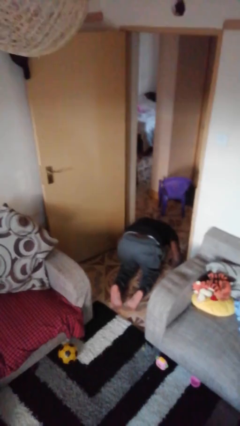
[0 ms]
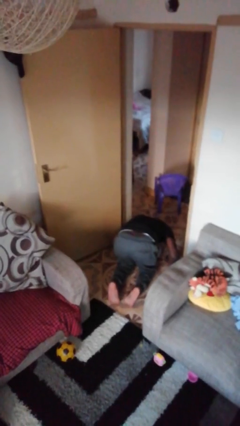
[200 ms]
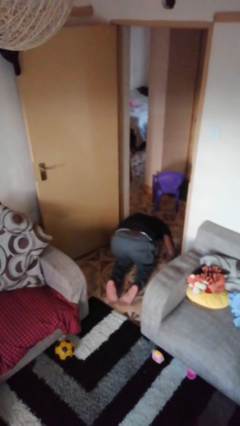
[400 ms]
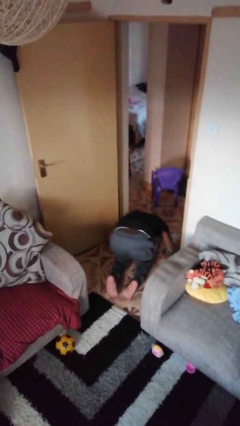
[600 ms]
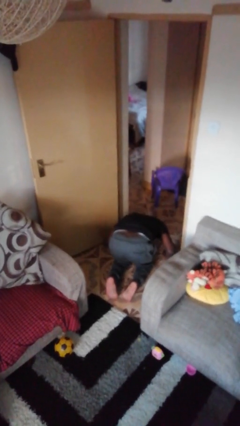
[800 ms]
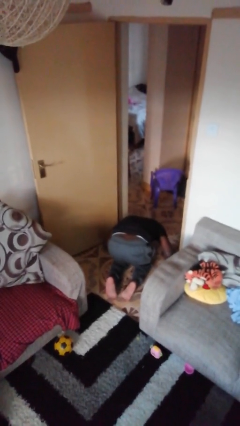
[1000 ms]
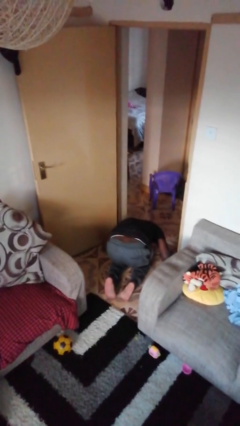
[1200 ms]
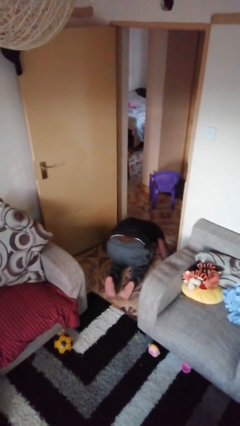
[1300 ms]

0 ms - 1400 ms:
person lies down on floor

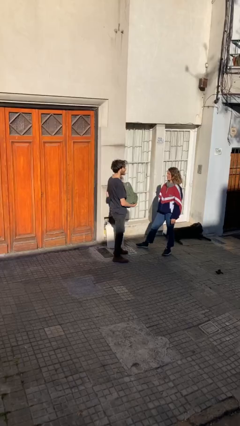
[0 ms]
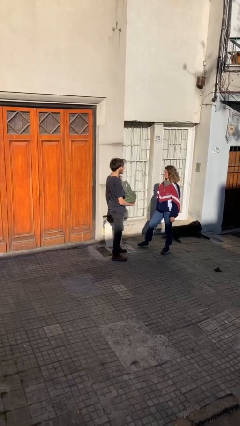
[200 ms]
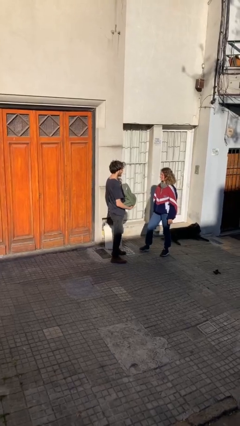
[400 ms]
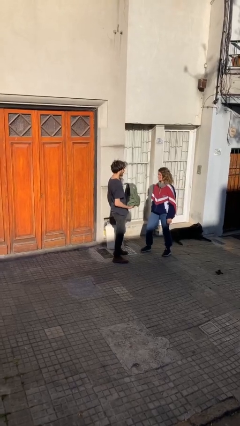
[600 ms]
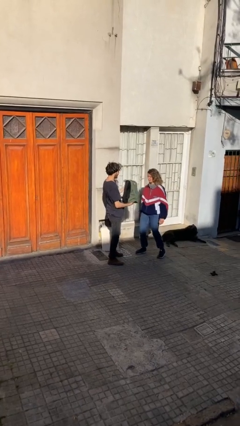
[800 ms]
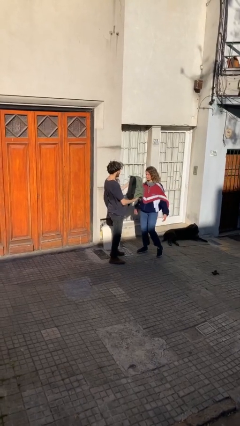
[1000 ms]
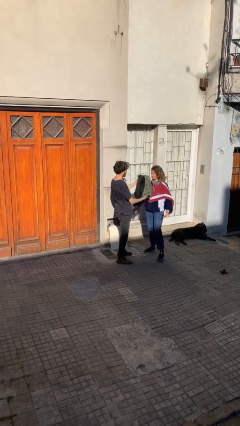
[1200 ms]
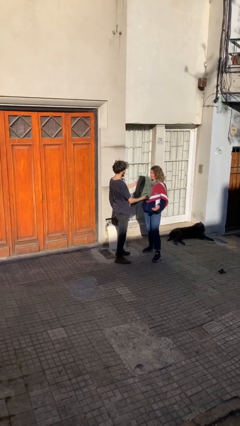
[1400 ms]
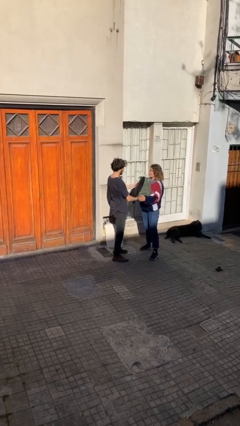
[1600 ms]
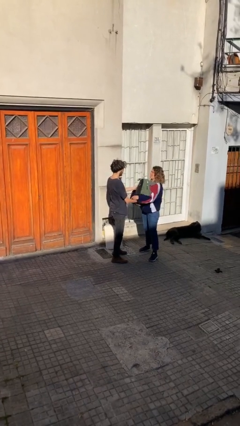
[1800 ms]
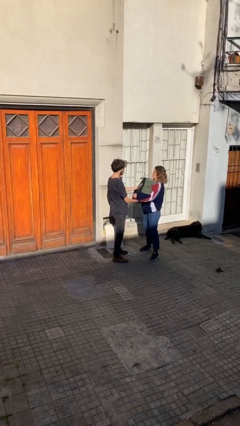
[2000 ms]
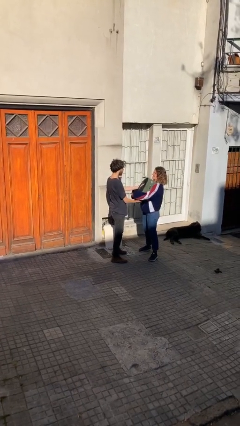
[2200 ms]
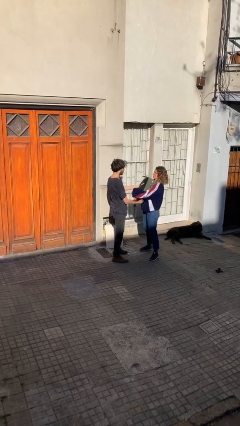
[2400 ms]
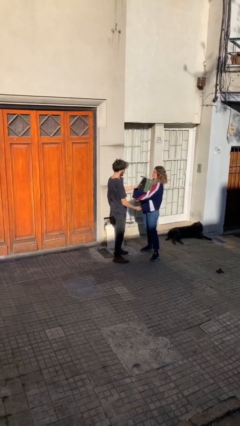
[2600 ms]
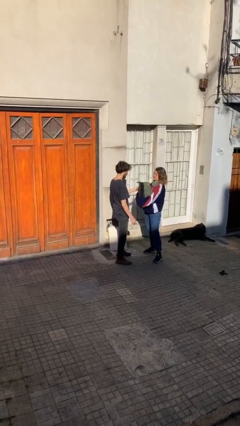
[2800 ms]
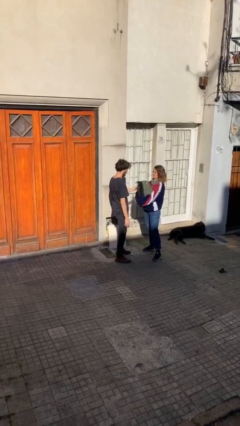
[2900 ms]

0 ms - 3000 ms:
person transfers object to person

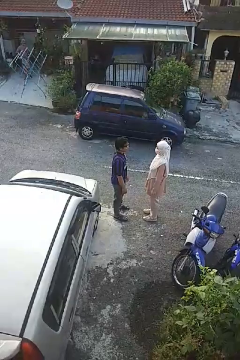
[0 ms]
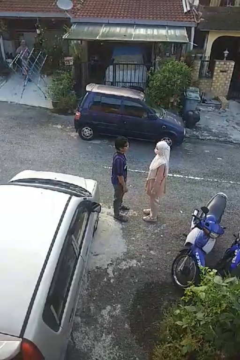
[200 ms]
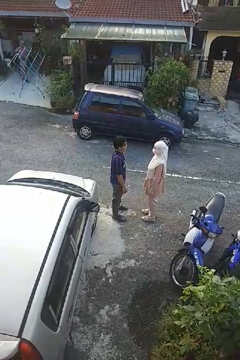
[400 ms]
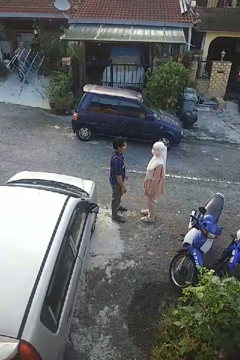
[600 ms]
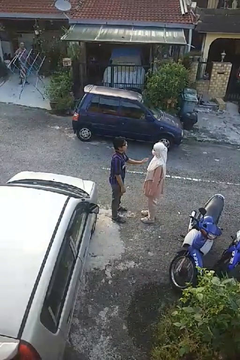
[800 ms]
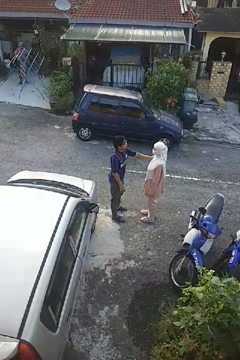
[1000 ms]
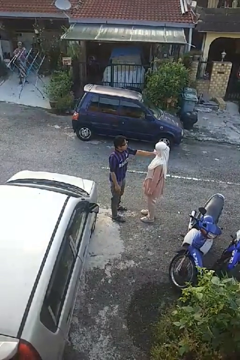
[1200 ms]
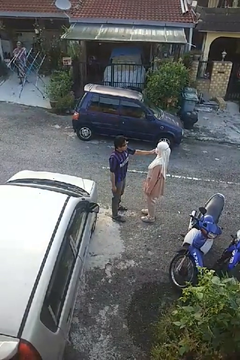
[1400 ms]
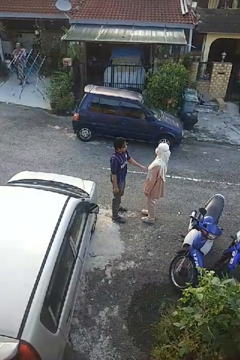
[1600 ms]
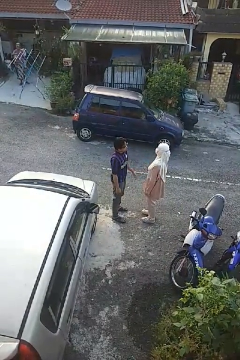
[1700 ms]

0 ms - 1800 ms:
person shoves person

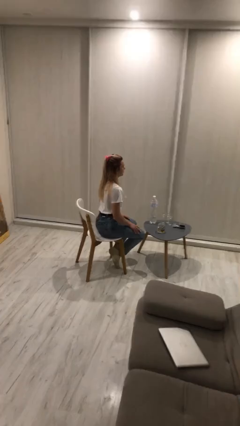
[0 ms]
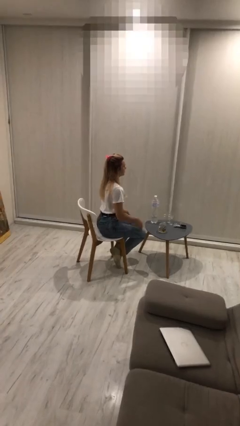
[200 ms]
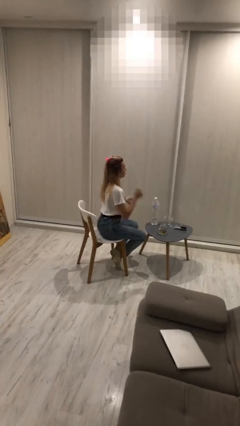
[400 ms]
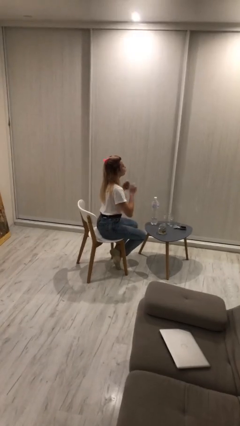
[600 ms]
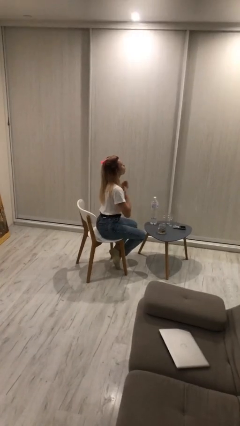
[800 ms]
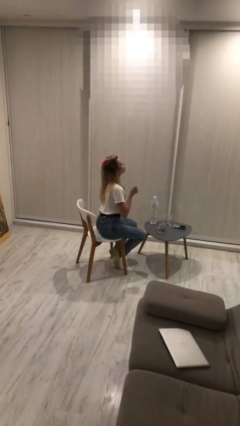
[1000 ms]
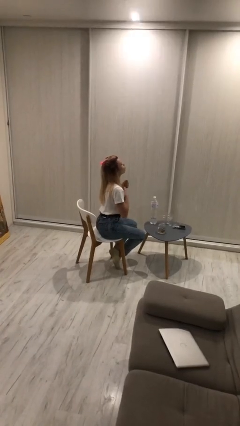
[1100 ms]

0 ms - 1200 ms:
person drums on chest

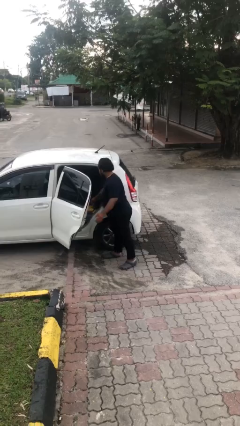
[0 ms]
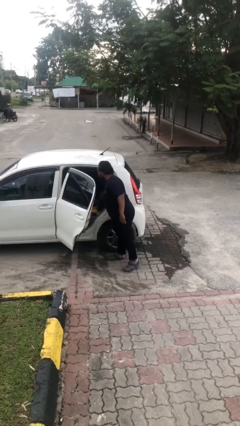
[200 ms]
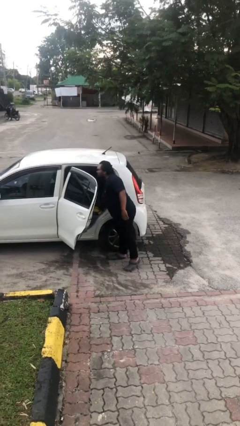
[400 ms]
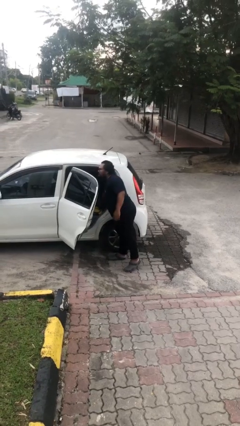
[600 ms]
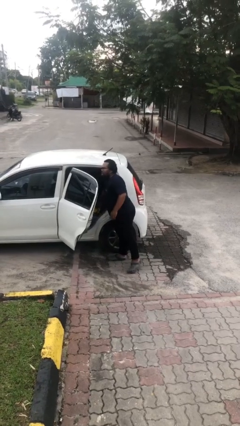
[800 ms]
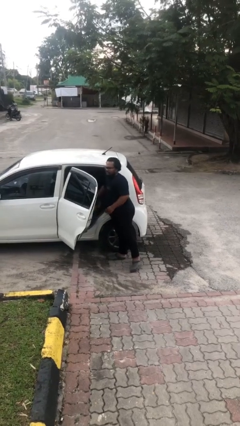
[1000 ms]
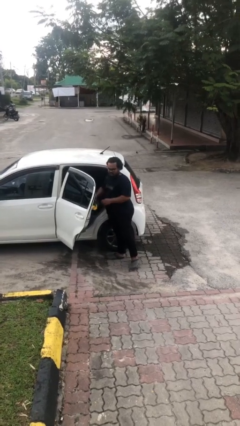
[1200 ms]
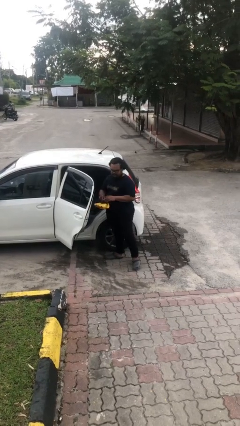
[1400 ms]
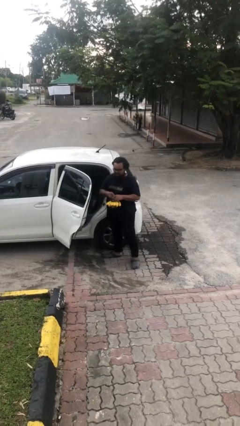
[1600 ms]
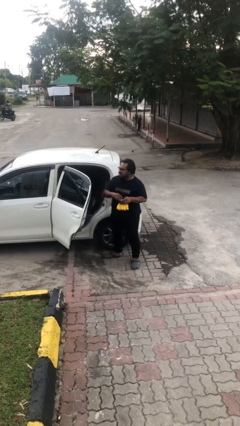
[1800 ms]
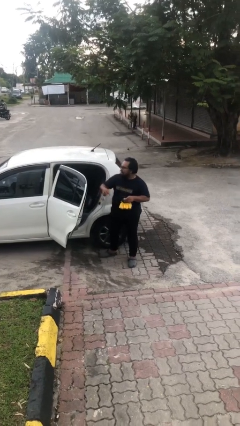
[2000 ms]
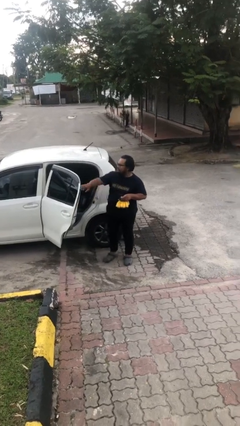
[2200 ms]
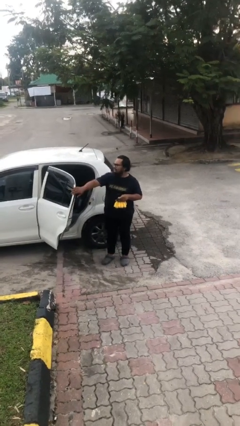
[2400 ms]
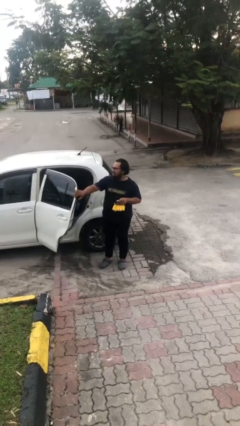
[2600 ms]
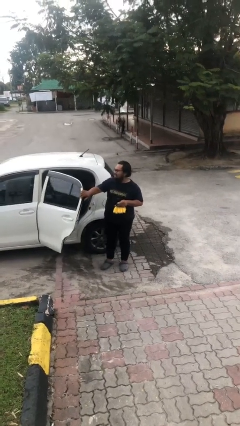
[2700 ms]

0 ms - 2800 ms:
person unloads car

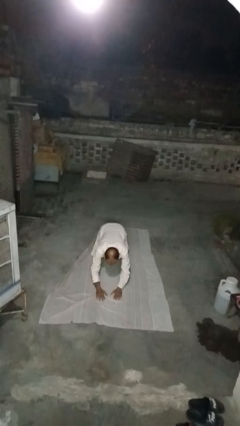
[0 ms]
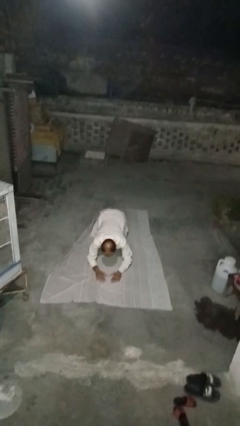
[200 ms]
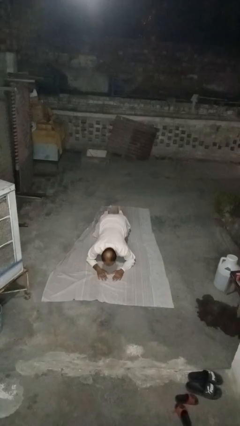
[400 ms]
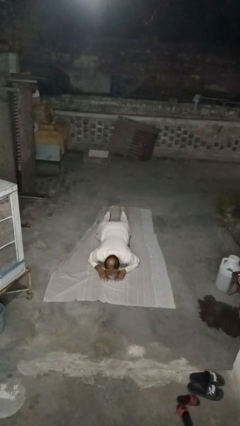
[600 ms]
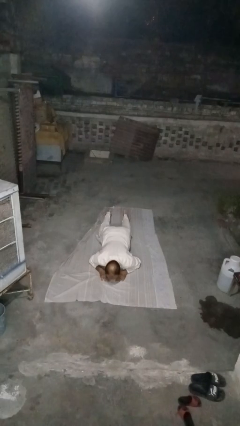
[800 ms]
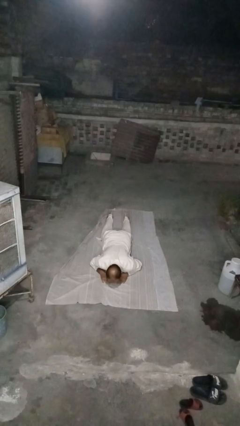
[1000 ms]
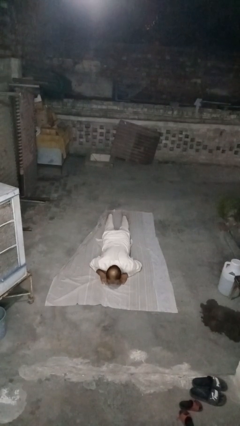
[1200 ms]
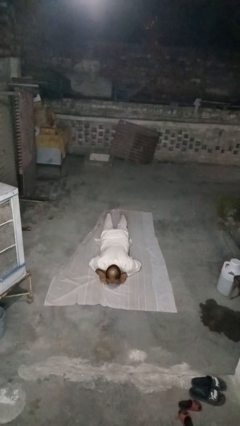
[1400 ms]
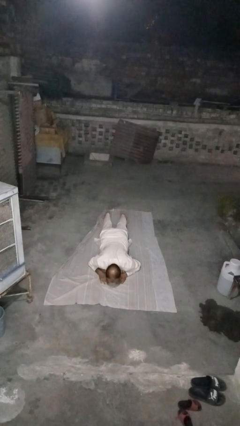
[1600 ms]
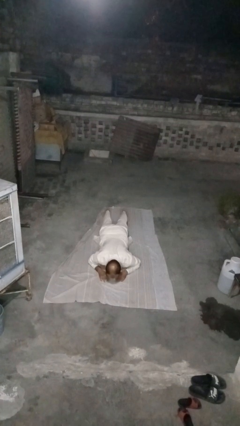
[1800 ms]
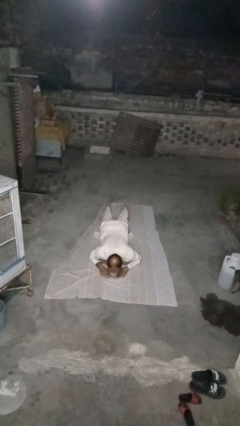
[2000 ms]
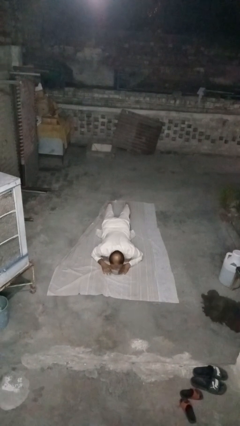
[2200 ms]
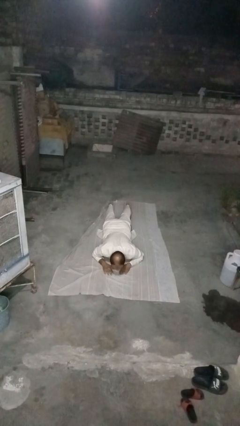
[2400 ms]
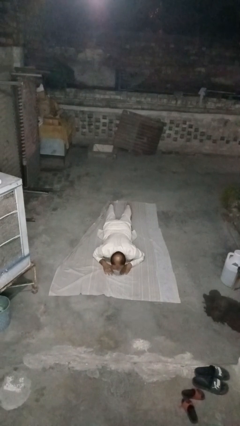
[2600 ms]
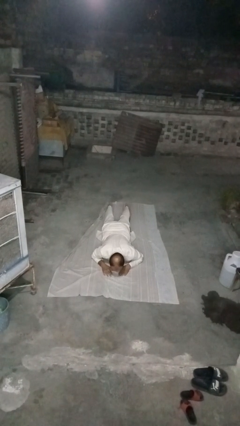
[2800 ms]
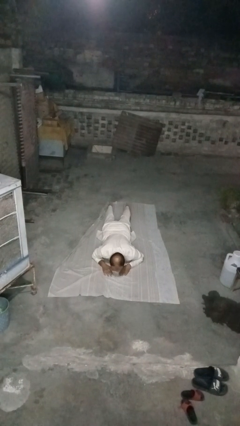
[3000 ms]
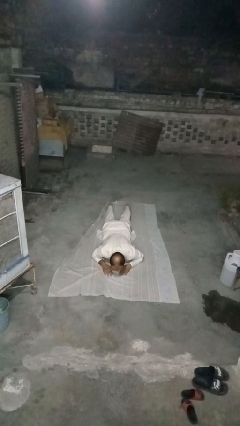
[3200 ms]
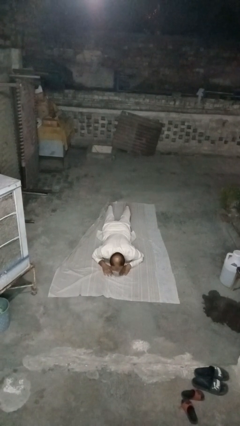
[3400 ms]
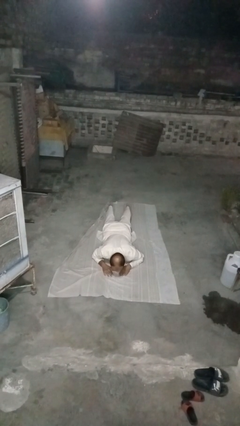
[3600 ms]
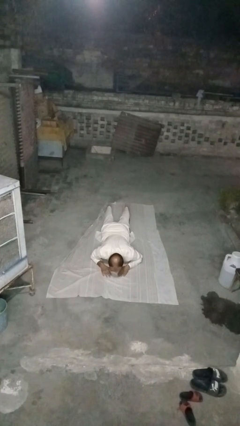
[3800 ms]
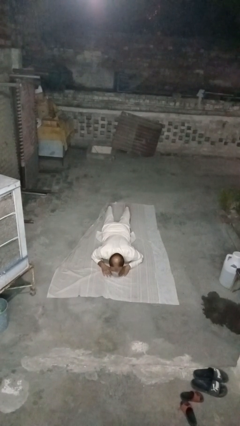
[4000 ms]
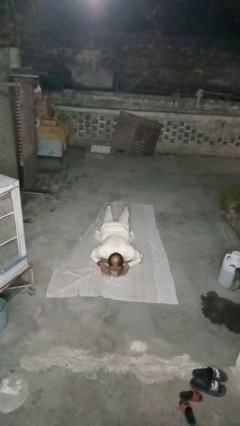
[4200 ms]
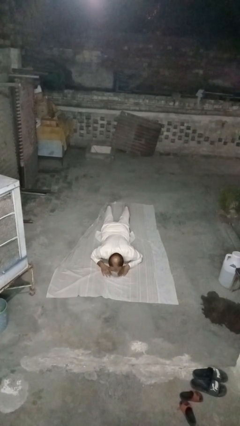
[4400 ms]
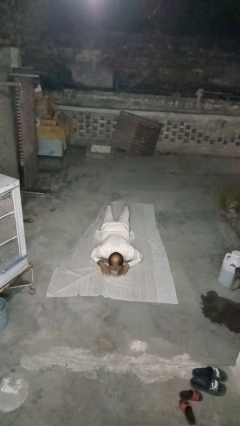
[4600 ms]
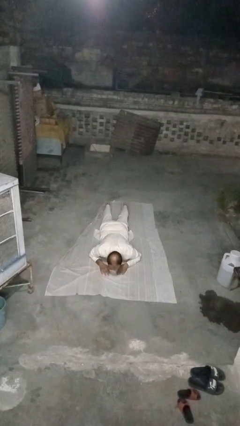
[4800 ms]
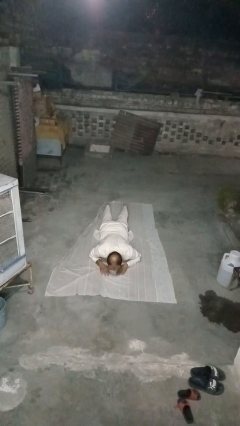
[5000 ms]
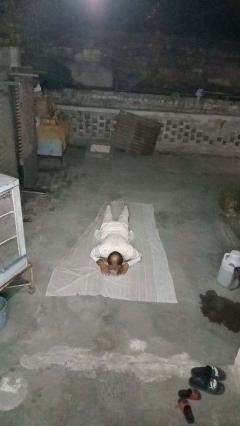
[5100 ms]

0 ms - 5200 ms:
person exercises with plank

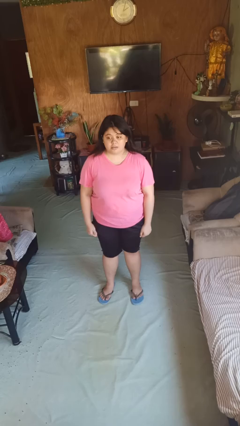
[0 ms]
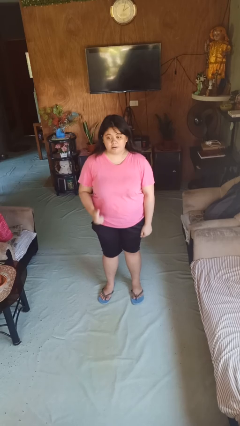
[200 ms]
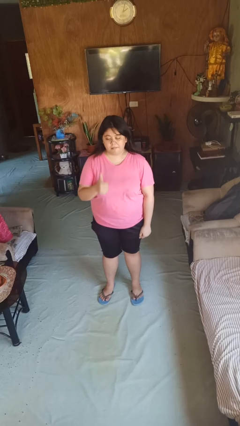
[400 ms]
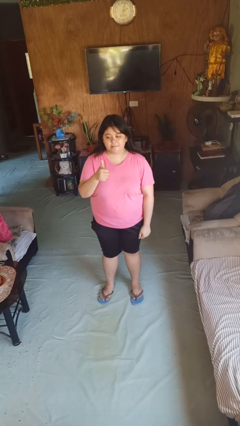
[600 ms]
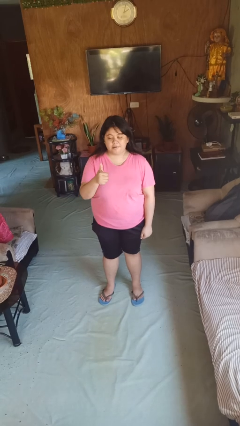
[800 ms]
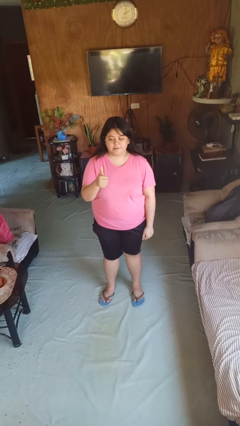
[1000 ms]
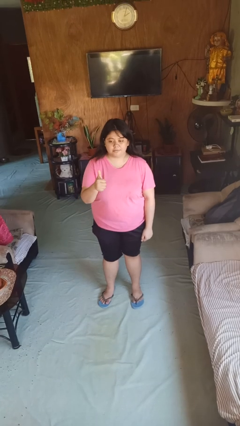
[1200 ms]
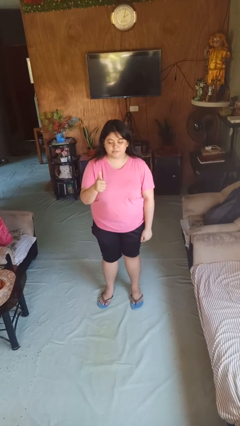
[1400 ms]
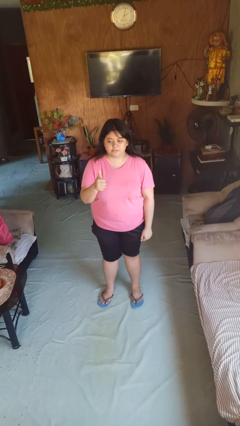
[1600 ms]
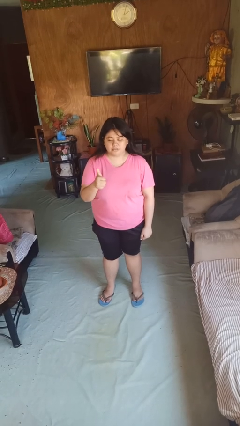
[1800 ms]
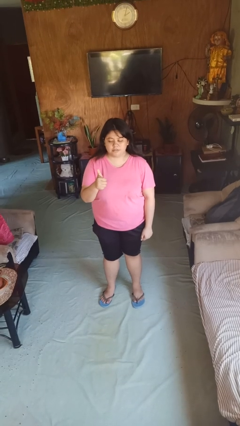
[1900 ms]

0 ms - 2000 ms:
person gestures thumbs up

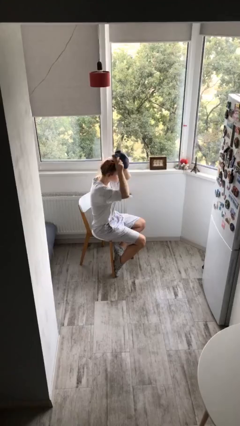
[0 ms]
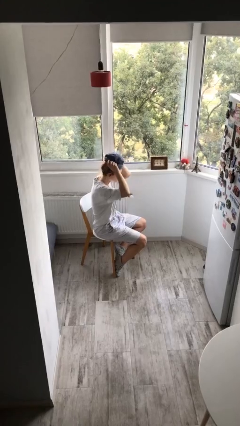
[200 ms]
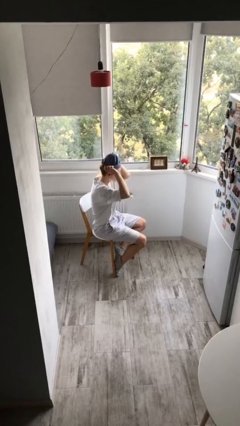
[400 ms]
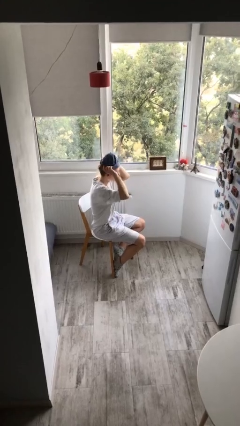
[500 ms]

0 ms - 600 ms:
person puts on hat
